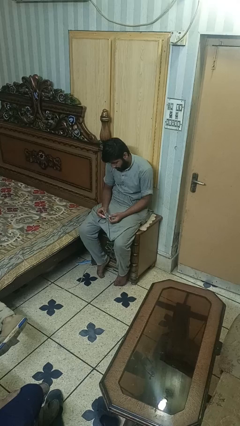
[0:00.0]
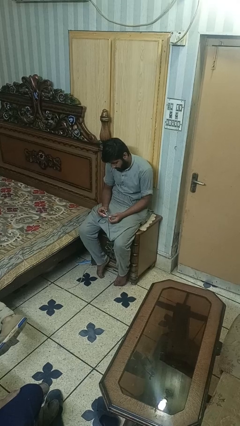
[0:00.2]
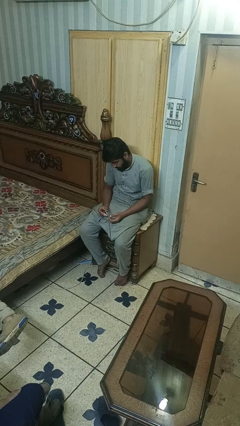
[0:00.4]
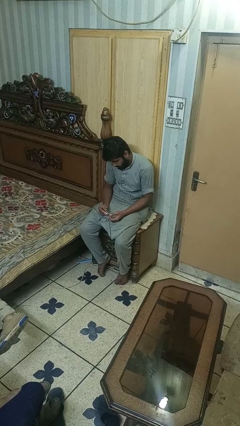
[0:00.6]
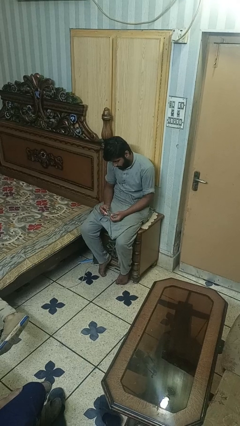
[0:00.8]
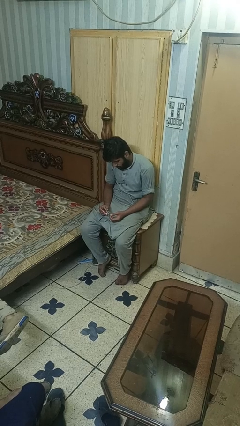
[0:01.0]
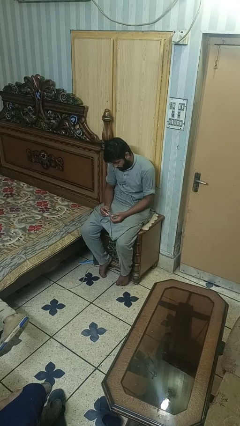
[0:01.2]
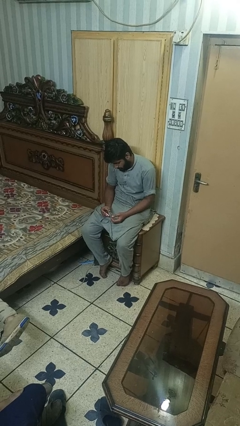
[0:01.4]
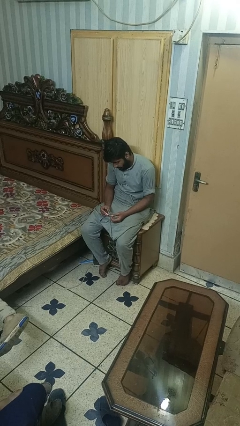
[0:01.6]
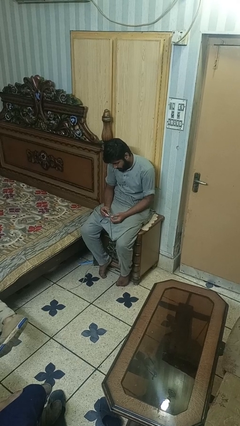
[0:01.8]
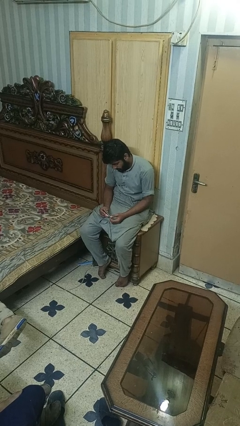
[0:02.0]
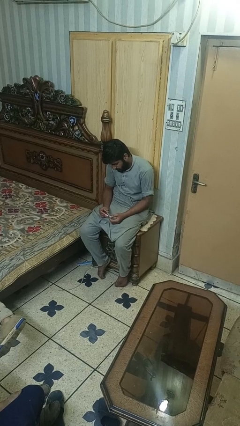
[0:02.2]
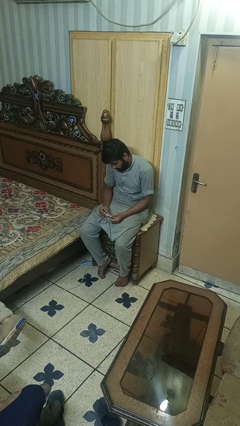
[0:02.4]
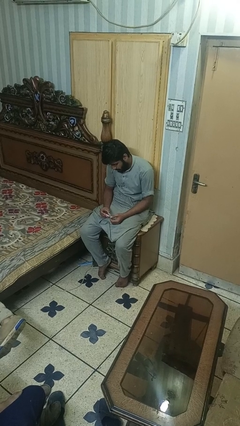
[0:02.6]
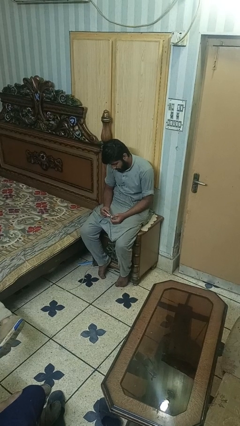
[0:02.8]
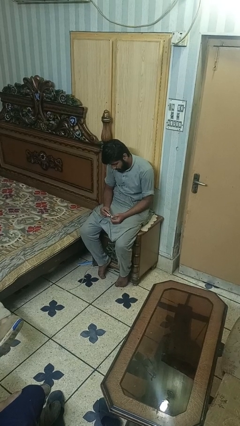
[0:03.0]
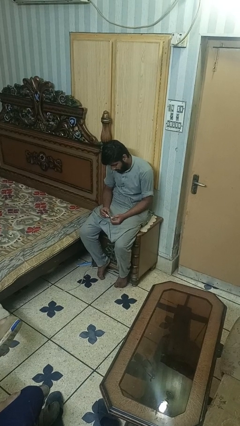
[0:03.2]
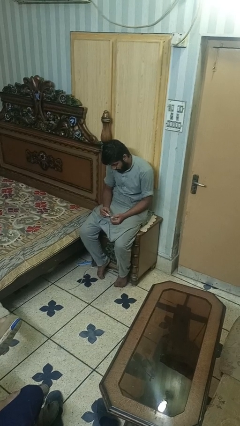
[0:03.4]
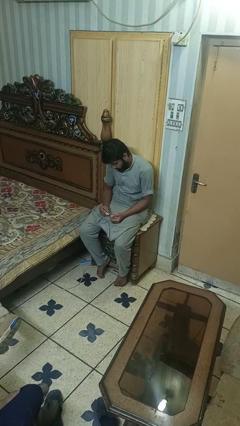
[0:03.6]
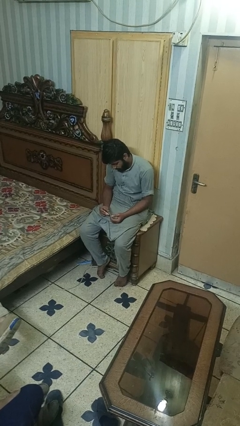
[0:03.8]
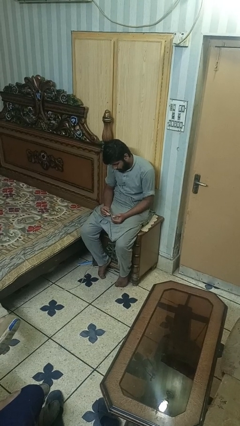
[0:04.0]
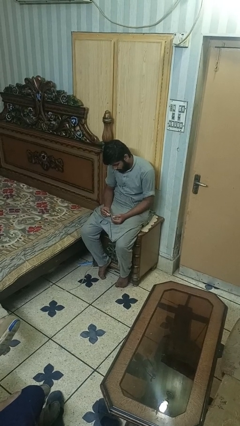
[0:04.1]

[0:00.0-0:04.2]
person clips fingernails

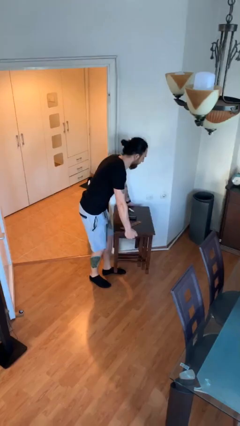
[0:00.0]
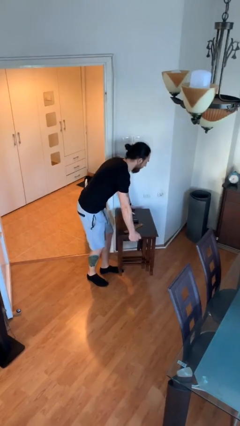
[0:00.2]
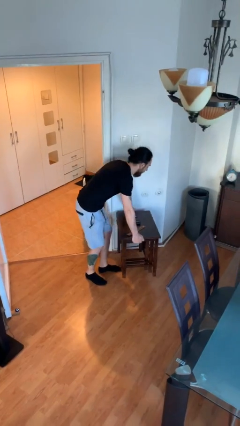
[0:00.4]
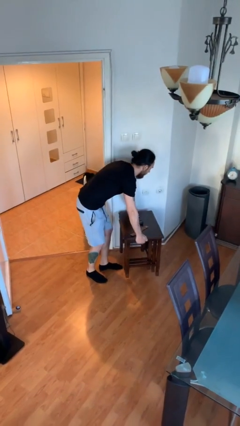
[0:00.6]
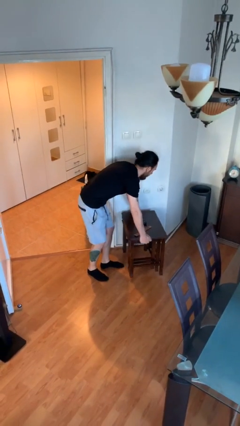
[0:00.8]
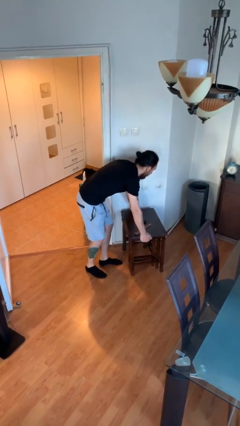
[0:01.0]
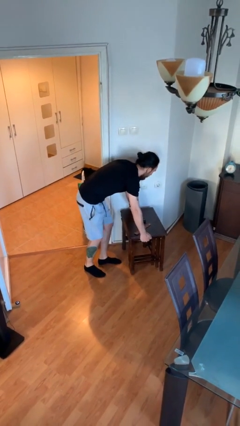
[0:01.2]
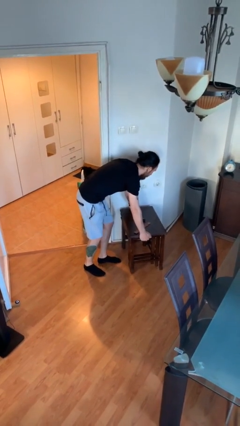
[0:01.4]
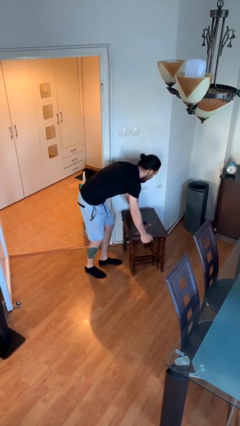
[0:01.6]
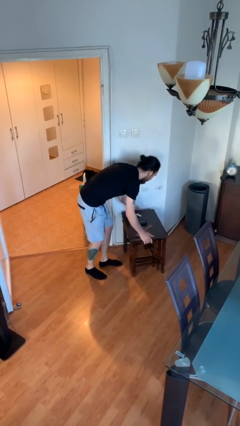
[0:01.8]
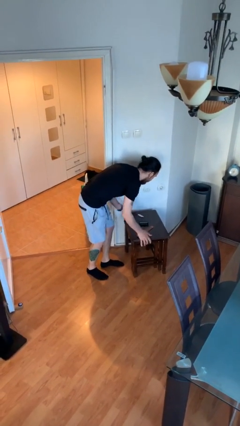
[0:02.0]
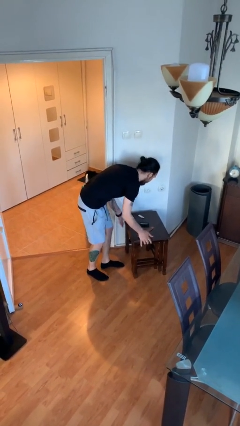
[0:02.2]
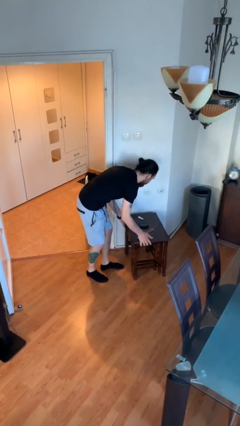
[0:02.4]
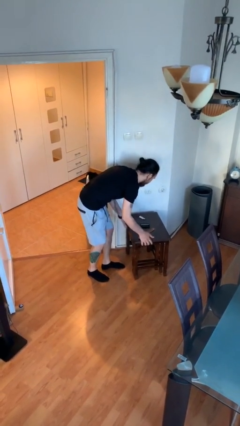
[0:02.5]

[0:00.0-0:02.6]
person puts down object on floor

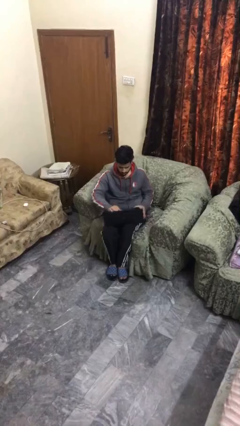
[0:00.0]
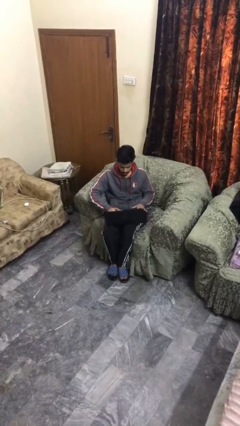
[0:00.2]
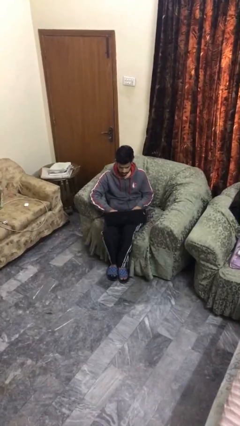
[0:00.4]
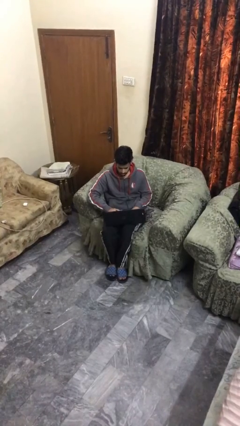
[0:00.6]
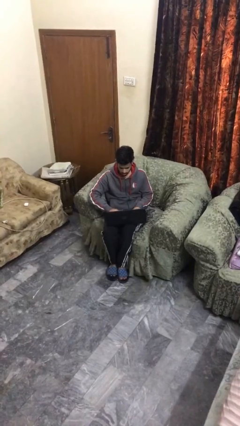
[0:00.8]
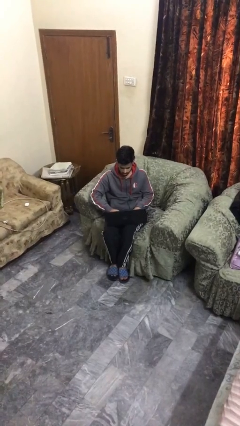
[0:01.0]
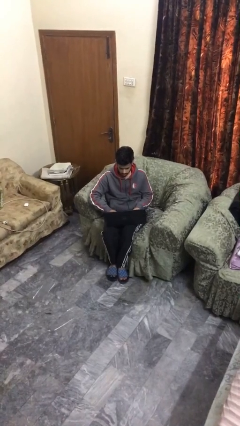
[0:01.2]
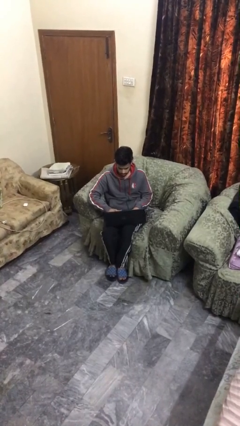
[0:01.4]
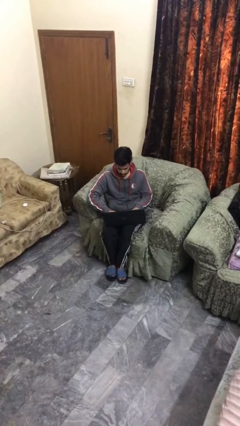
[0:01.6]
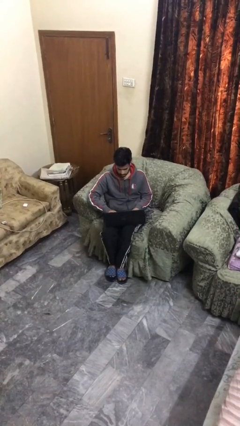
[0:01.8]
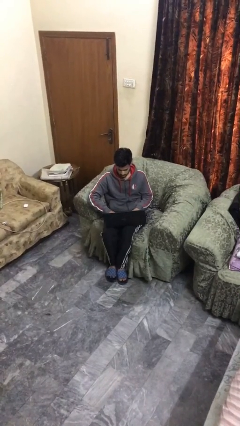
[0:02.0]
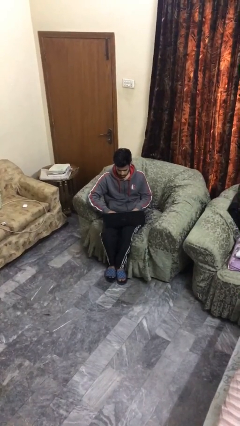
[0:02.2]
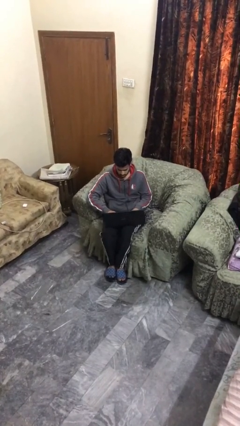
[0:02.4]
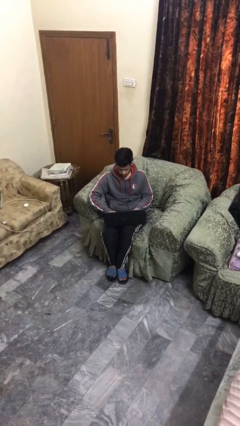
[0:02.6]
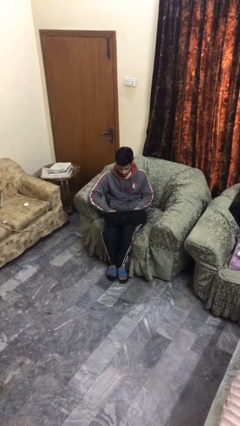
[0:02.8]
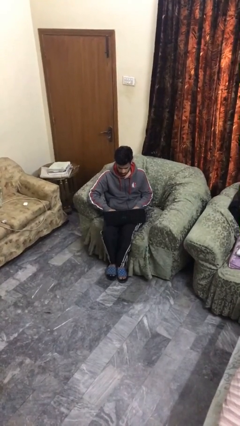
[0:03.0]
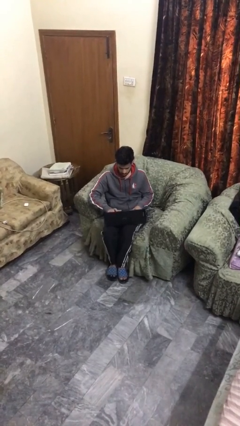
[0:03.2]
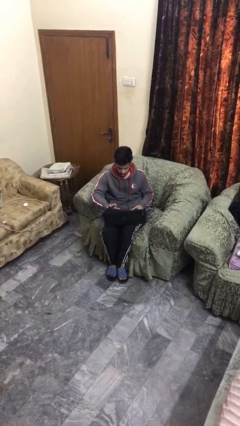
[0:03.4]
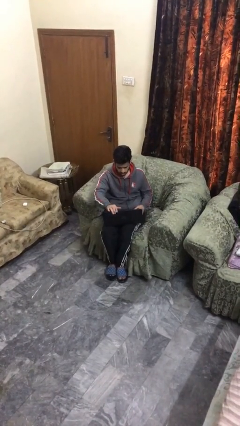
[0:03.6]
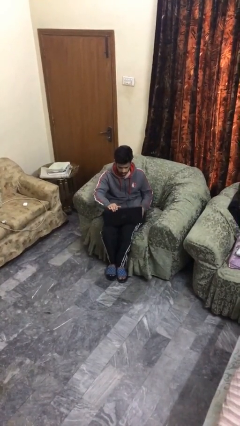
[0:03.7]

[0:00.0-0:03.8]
person interacts with laptop

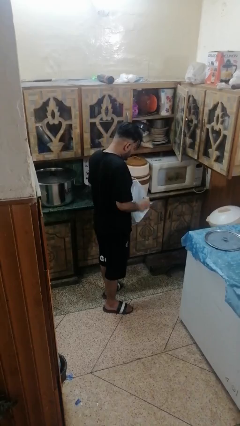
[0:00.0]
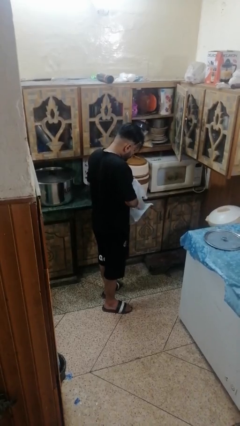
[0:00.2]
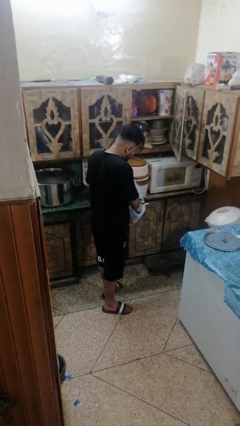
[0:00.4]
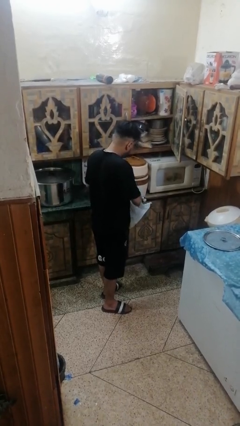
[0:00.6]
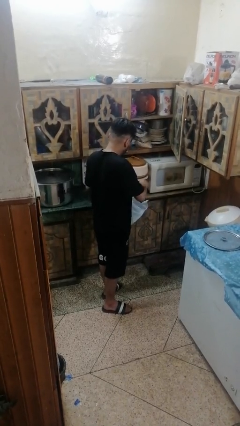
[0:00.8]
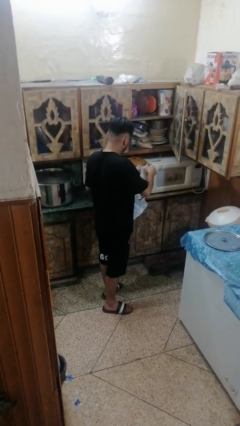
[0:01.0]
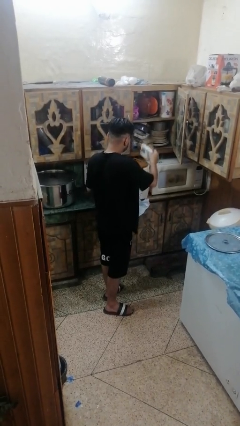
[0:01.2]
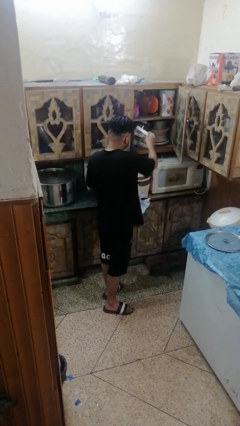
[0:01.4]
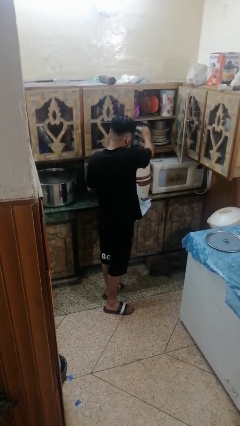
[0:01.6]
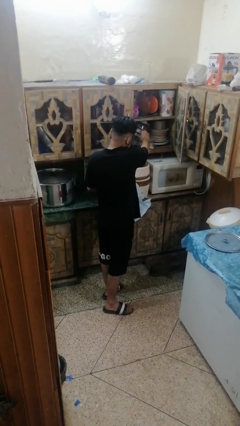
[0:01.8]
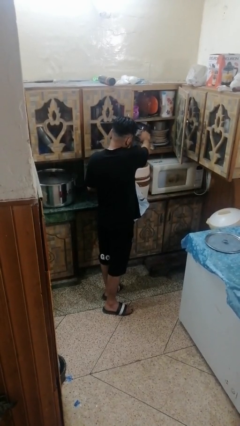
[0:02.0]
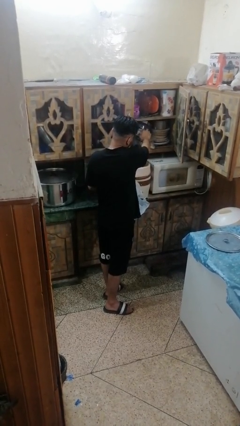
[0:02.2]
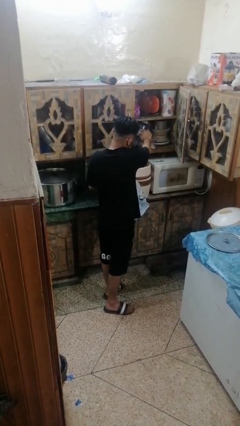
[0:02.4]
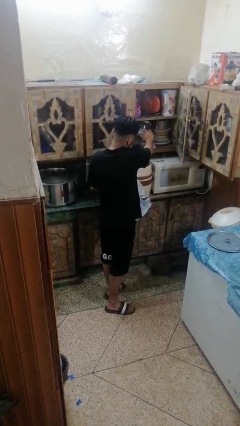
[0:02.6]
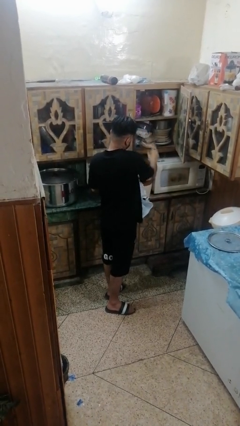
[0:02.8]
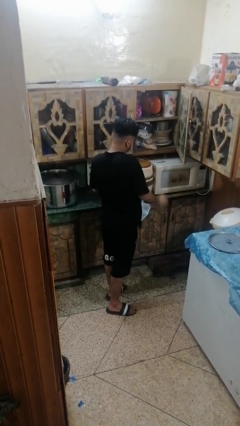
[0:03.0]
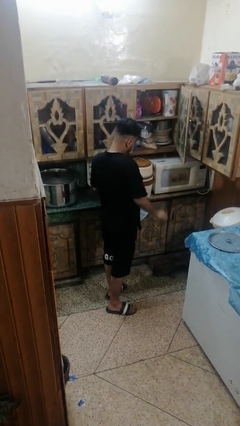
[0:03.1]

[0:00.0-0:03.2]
person loads groceries into cabinet

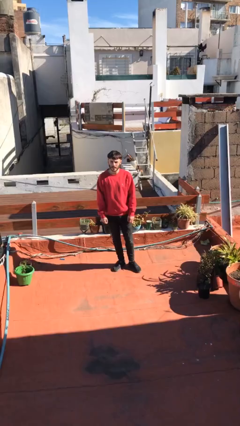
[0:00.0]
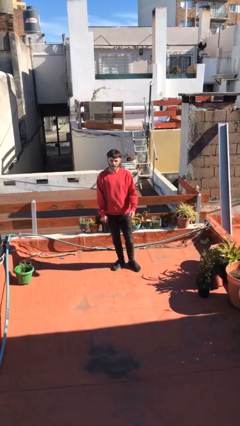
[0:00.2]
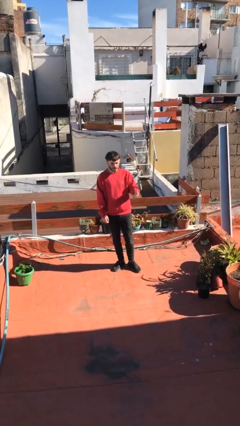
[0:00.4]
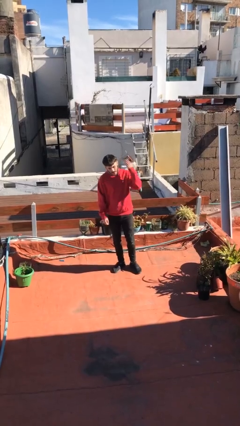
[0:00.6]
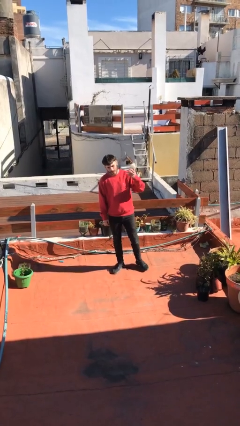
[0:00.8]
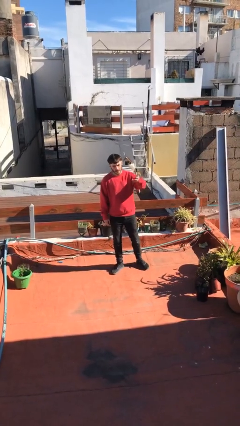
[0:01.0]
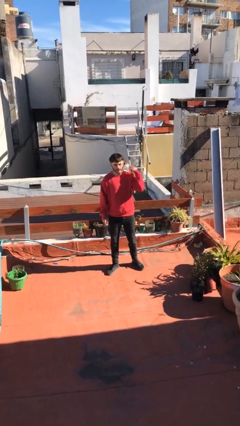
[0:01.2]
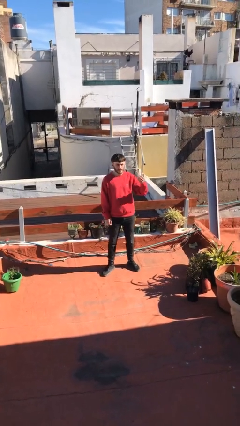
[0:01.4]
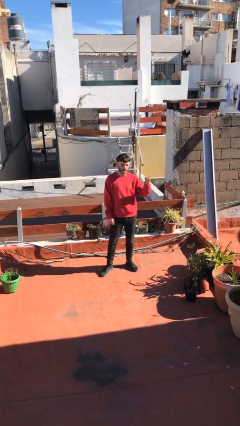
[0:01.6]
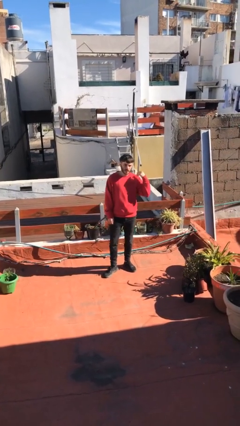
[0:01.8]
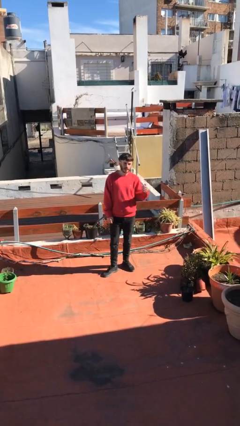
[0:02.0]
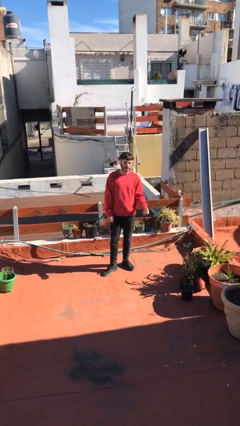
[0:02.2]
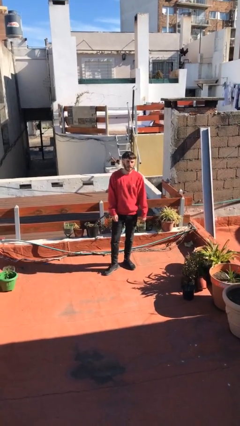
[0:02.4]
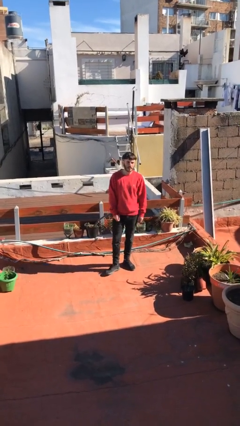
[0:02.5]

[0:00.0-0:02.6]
person gestures come here

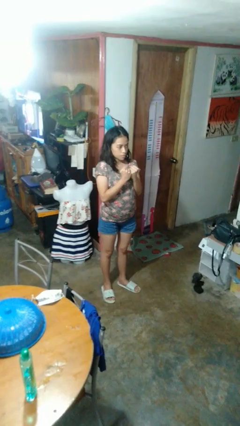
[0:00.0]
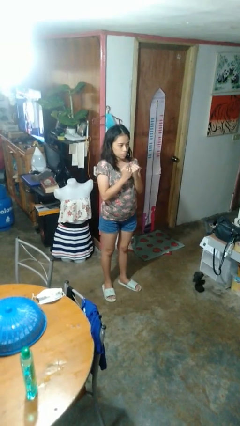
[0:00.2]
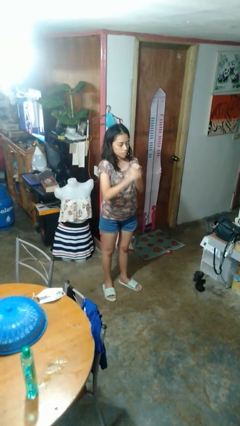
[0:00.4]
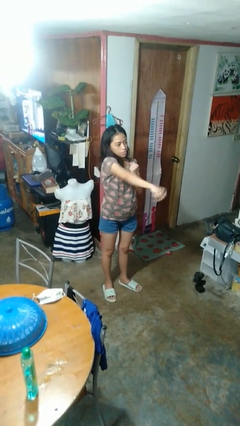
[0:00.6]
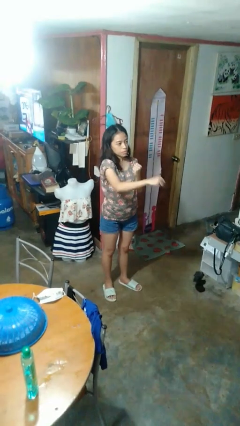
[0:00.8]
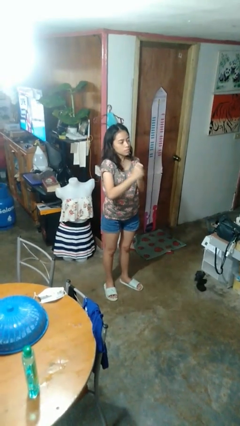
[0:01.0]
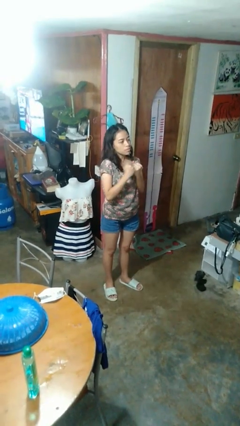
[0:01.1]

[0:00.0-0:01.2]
person punches
